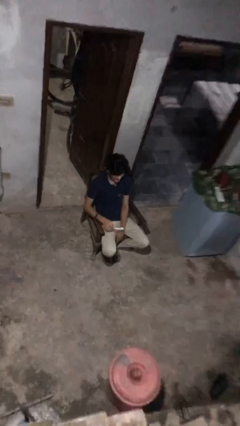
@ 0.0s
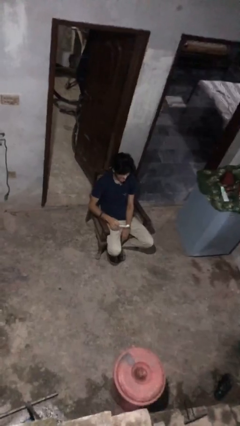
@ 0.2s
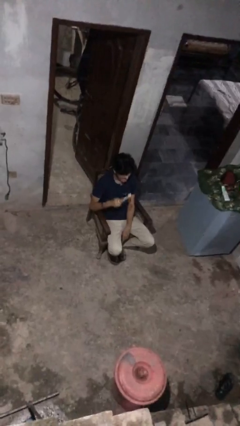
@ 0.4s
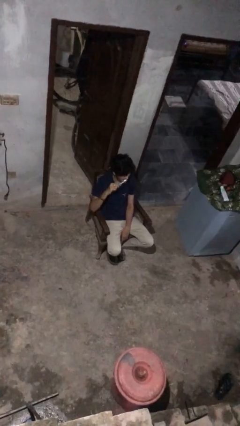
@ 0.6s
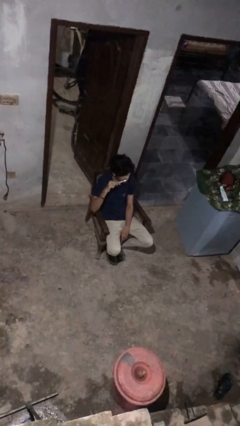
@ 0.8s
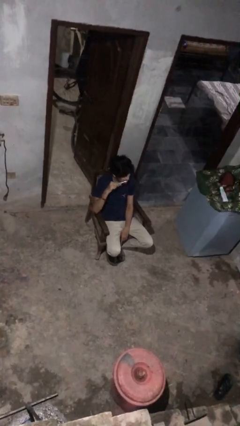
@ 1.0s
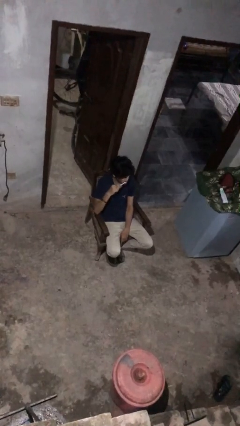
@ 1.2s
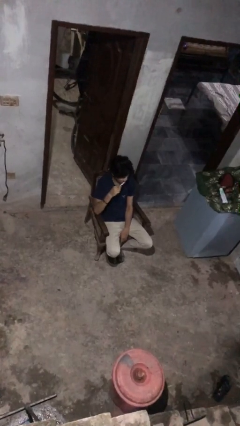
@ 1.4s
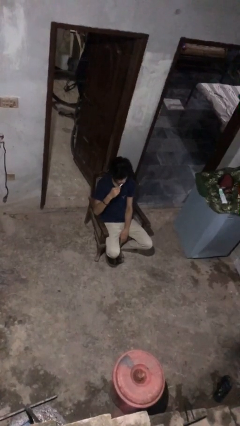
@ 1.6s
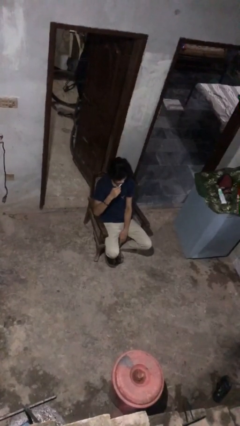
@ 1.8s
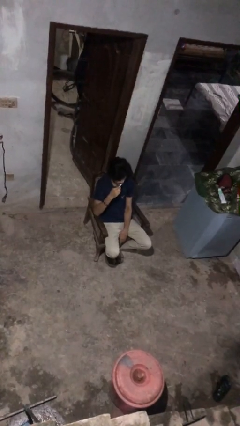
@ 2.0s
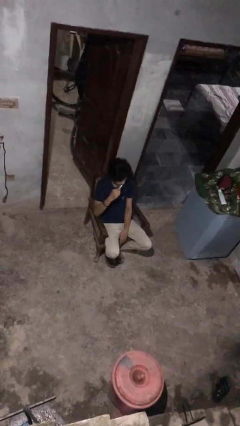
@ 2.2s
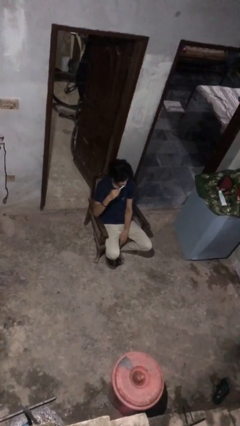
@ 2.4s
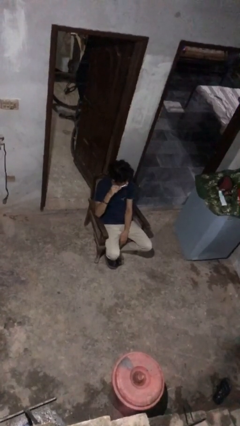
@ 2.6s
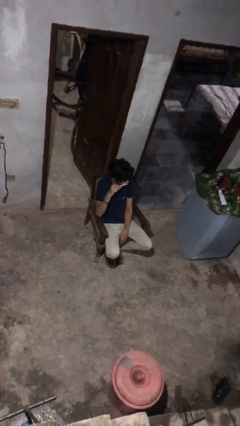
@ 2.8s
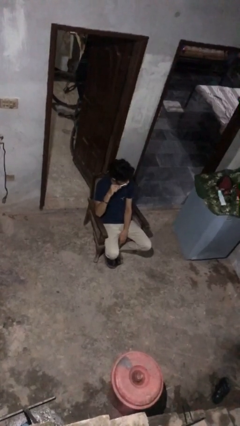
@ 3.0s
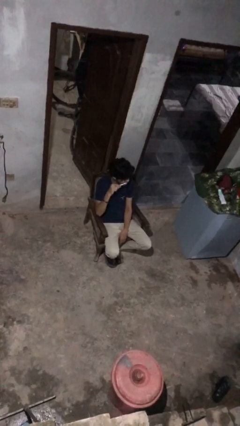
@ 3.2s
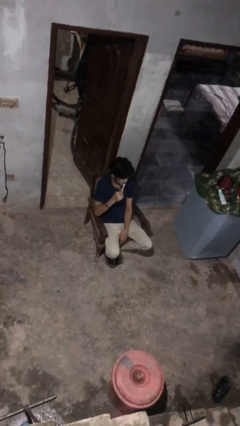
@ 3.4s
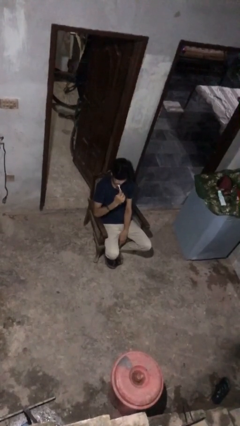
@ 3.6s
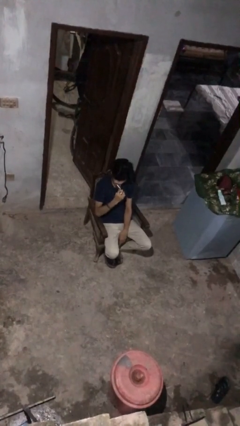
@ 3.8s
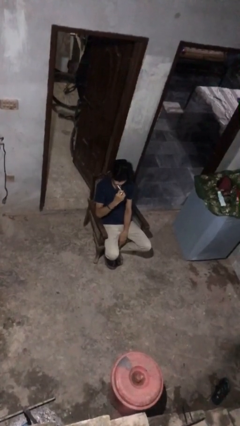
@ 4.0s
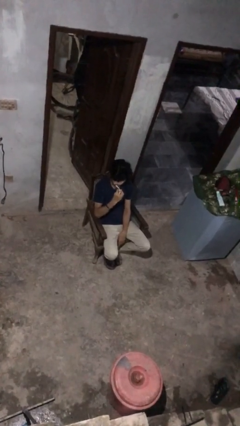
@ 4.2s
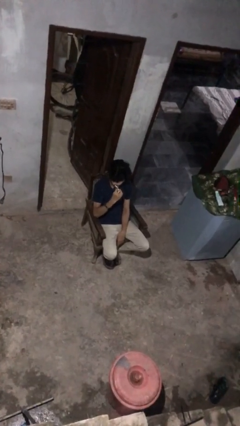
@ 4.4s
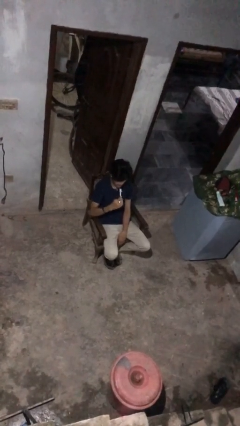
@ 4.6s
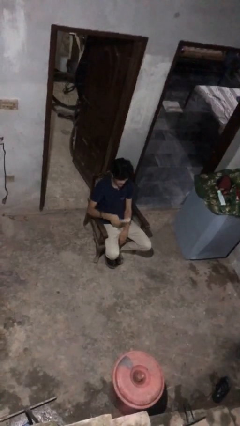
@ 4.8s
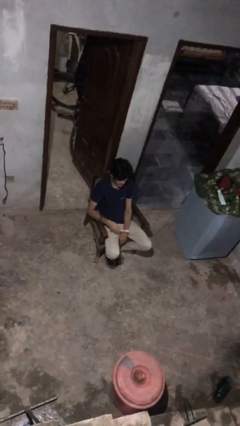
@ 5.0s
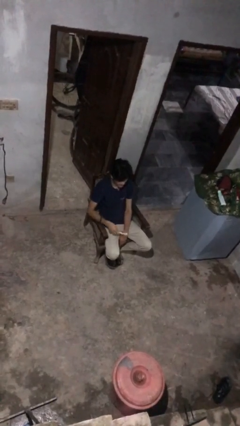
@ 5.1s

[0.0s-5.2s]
person brushes teeth

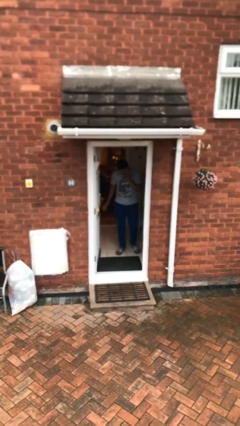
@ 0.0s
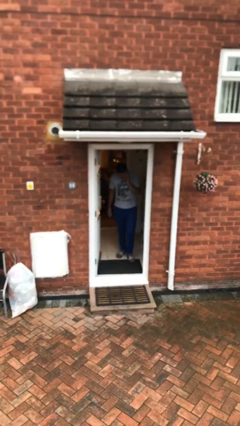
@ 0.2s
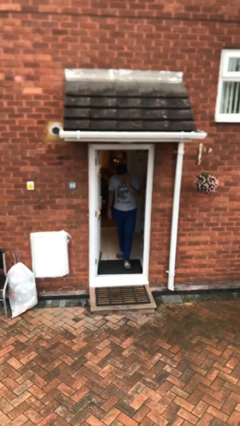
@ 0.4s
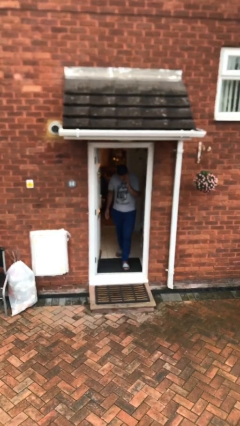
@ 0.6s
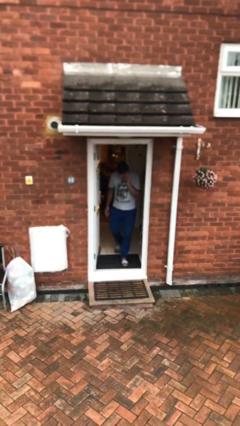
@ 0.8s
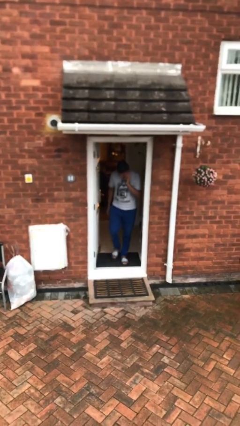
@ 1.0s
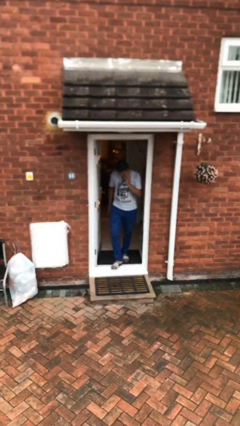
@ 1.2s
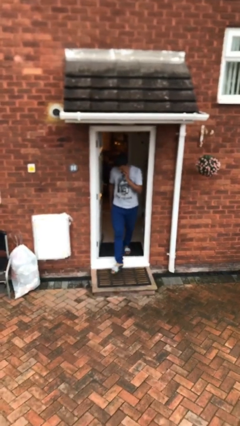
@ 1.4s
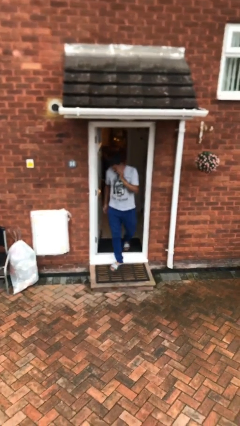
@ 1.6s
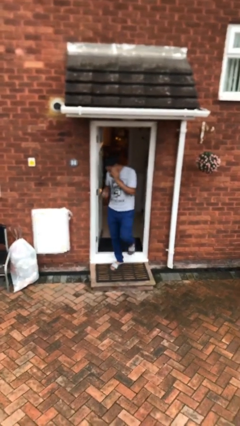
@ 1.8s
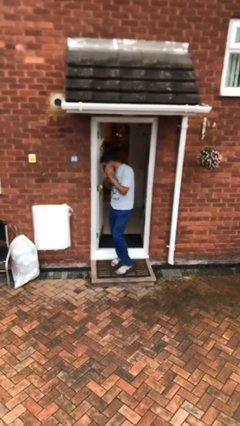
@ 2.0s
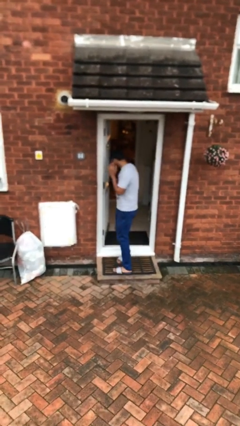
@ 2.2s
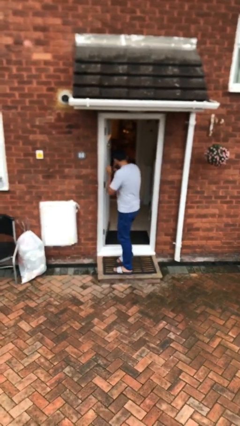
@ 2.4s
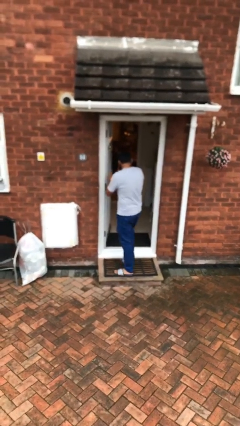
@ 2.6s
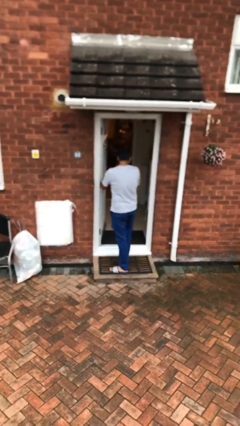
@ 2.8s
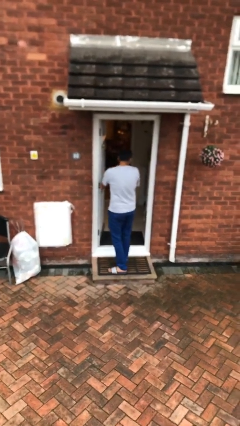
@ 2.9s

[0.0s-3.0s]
person enters scene through structure

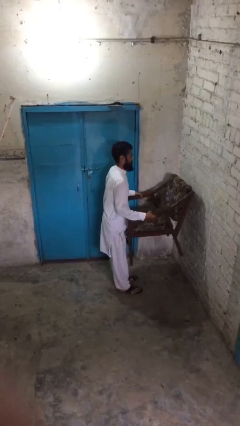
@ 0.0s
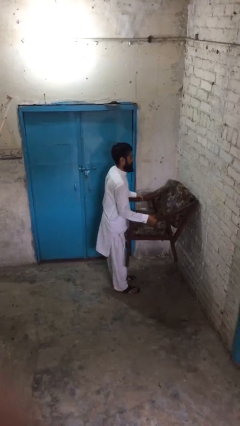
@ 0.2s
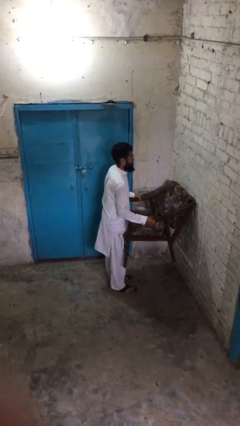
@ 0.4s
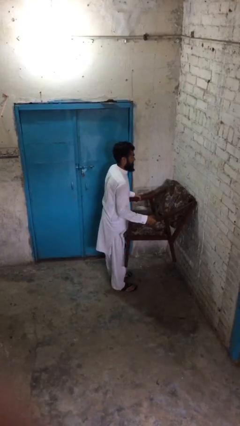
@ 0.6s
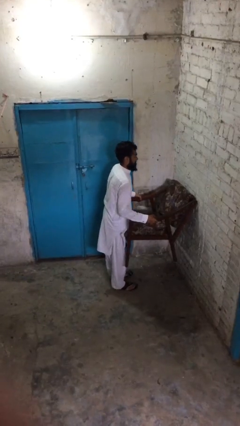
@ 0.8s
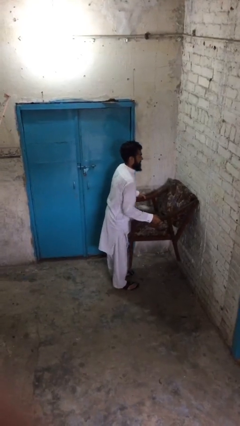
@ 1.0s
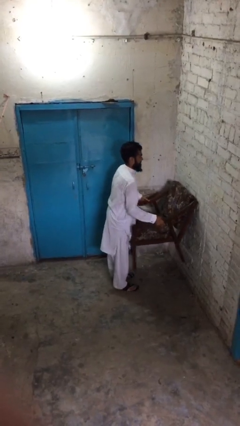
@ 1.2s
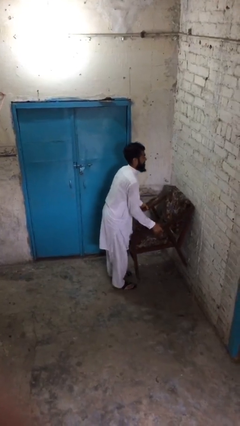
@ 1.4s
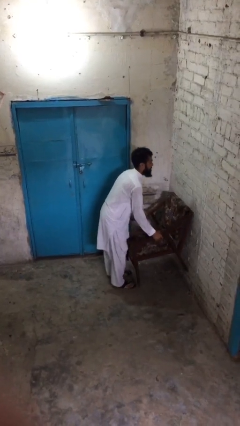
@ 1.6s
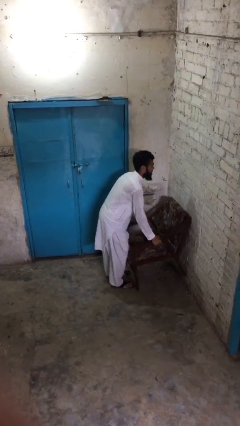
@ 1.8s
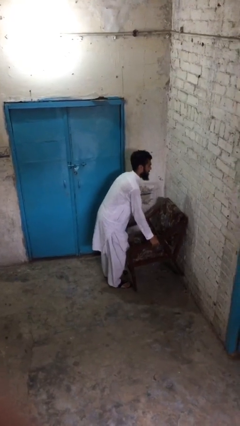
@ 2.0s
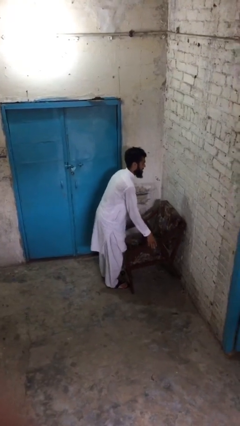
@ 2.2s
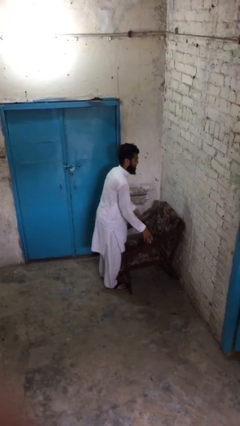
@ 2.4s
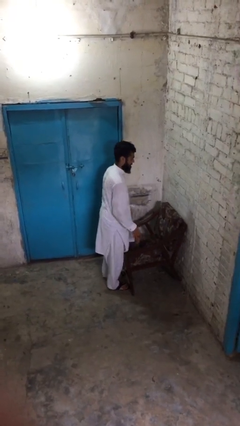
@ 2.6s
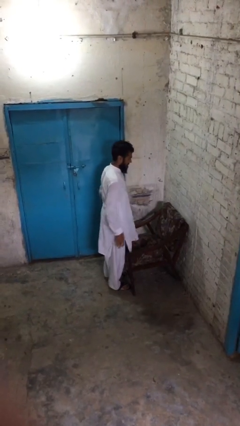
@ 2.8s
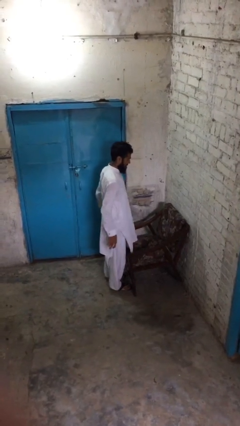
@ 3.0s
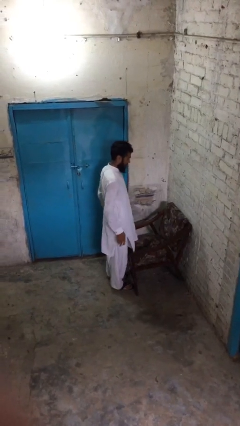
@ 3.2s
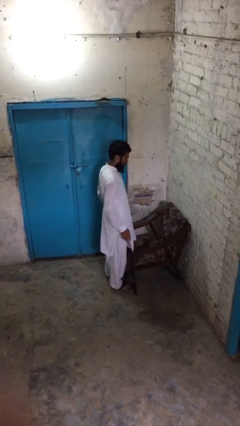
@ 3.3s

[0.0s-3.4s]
person puts down object on floor

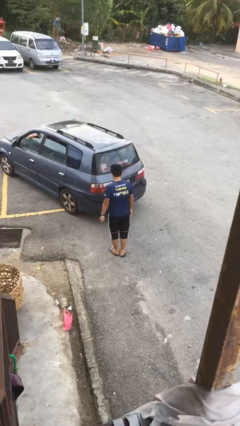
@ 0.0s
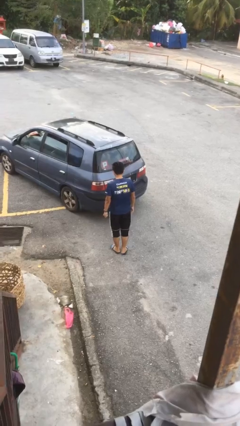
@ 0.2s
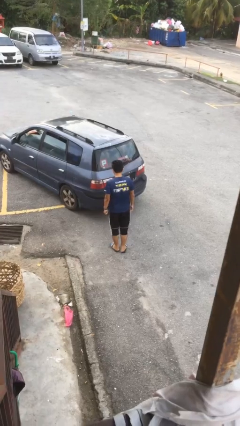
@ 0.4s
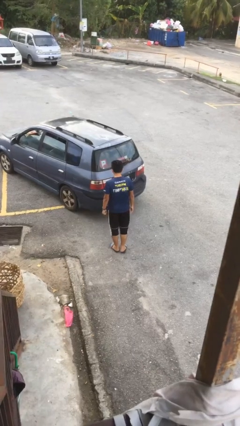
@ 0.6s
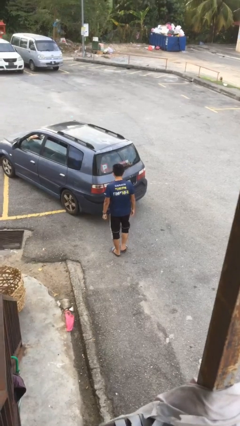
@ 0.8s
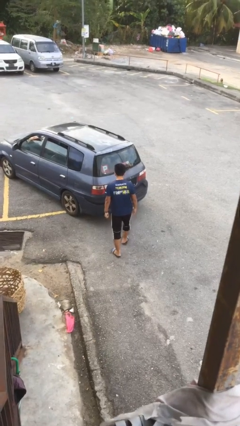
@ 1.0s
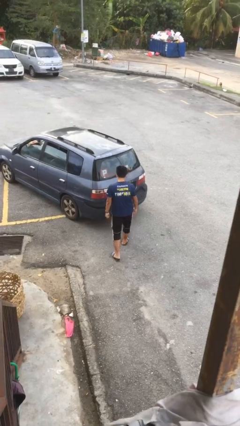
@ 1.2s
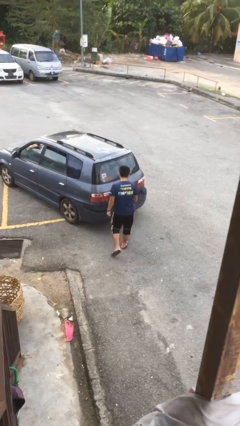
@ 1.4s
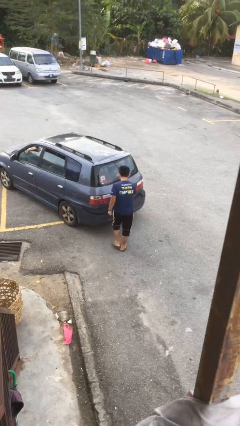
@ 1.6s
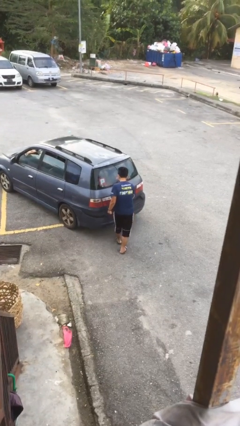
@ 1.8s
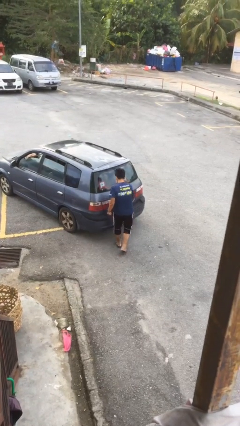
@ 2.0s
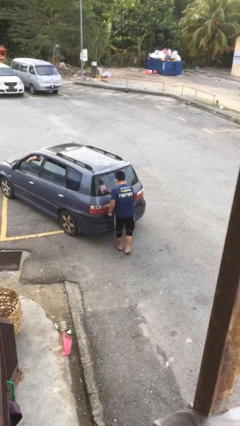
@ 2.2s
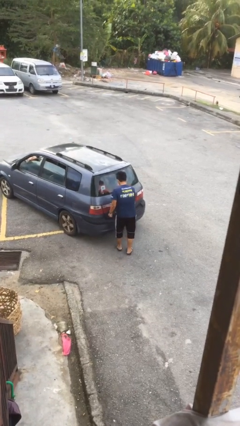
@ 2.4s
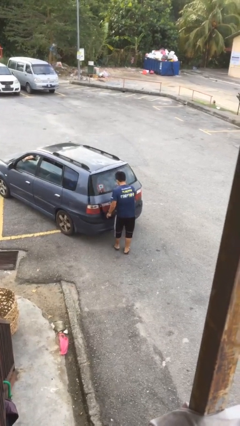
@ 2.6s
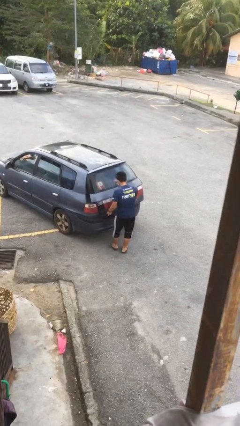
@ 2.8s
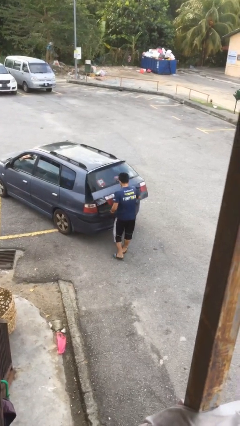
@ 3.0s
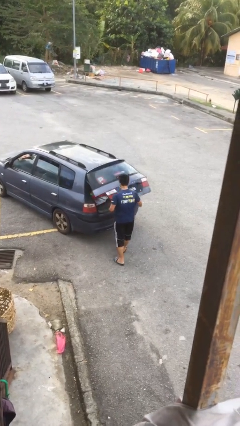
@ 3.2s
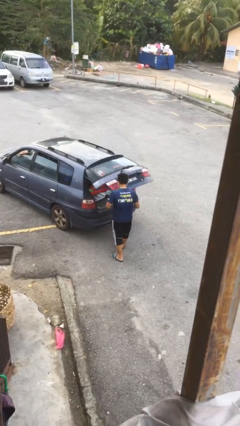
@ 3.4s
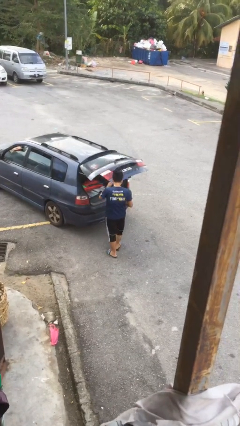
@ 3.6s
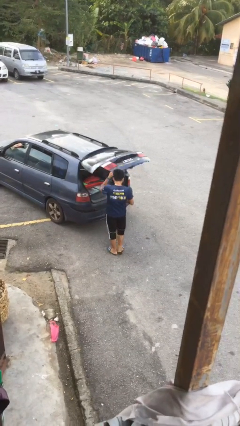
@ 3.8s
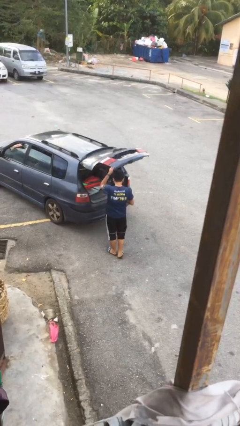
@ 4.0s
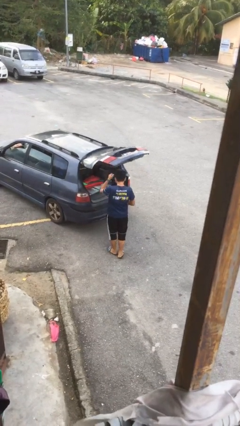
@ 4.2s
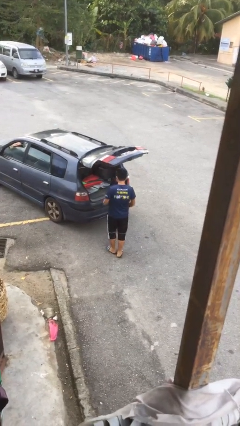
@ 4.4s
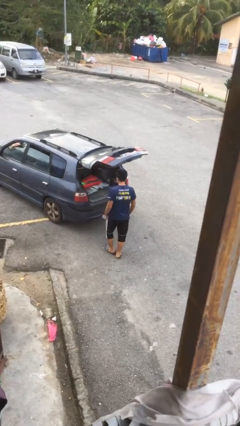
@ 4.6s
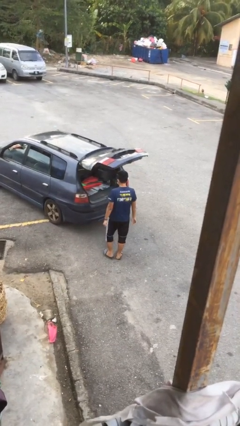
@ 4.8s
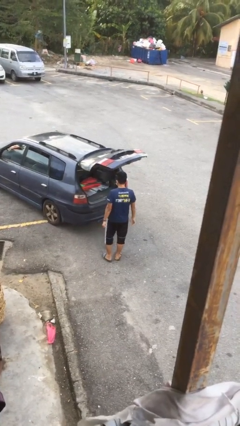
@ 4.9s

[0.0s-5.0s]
person opens car trunk

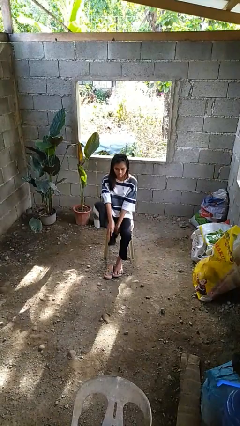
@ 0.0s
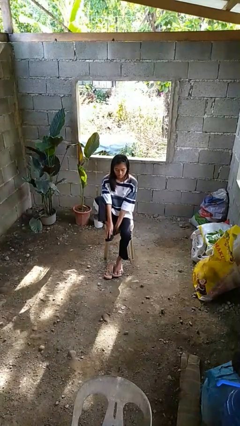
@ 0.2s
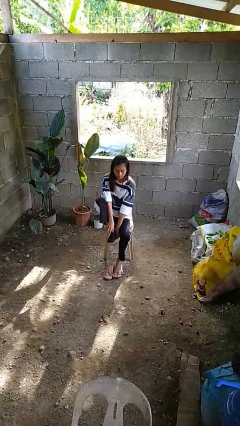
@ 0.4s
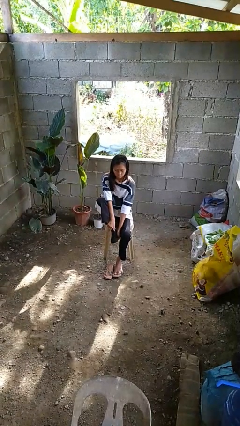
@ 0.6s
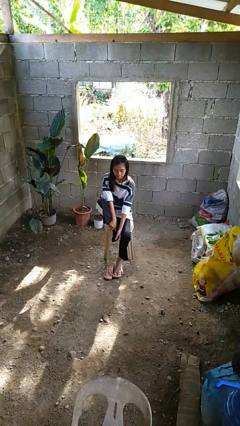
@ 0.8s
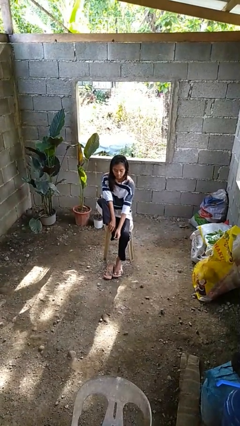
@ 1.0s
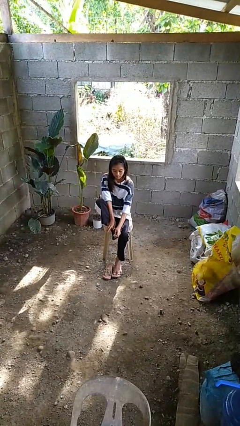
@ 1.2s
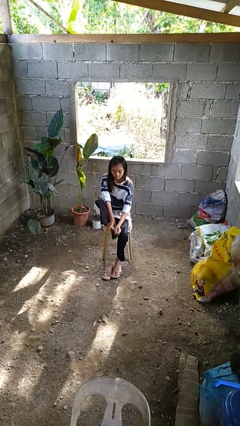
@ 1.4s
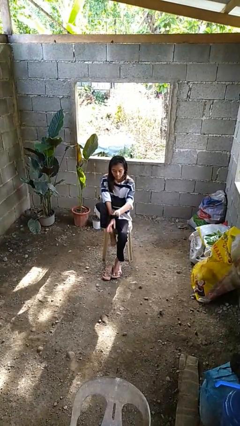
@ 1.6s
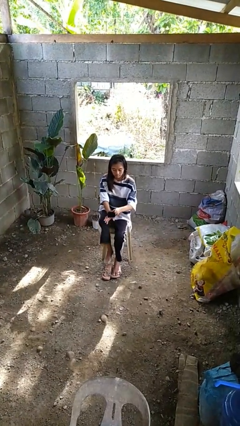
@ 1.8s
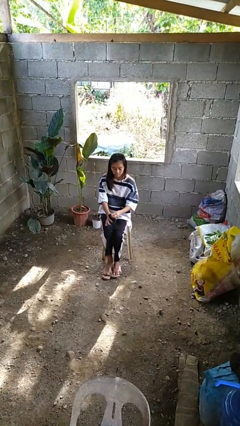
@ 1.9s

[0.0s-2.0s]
person takes off socks
